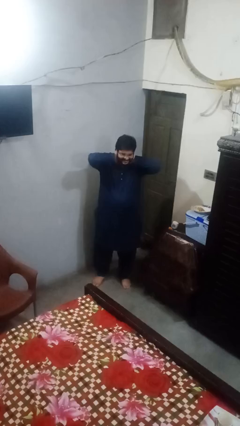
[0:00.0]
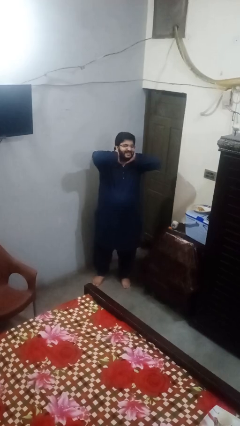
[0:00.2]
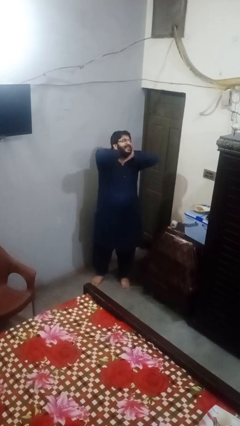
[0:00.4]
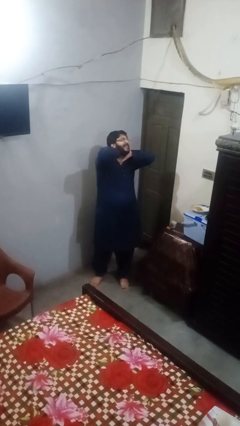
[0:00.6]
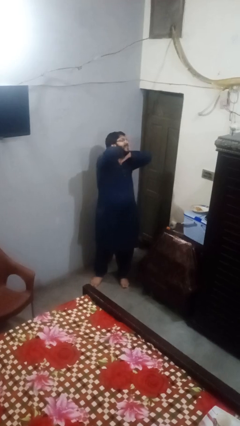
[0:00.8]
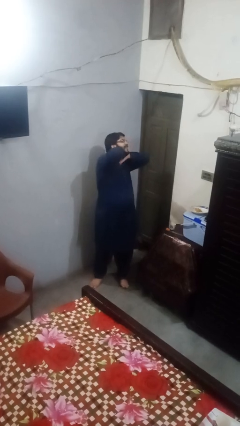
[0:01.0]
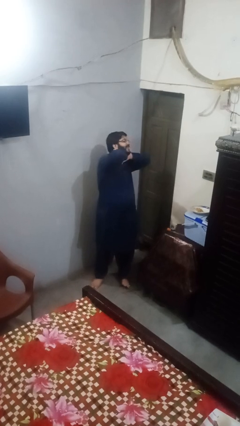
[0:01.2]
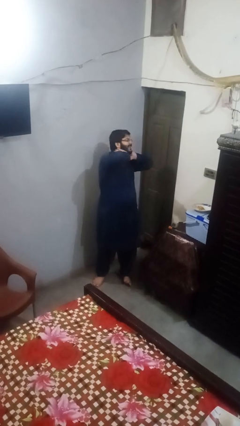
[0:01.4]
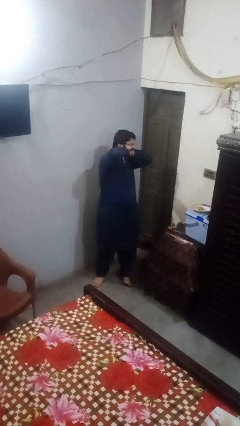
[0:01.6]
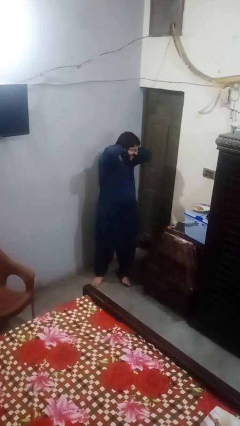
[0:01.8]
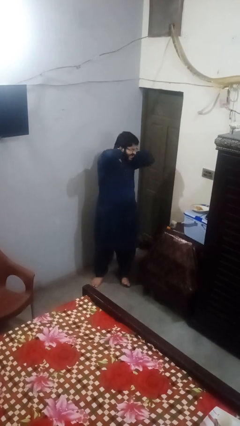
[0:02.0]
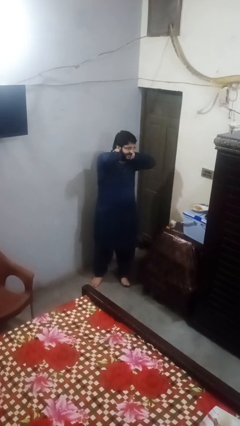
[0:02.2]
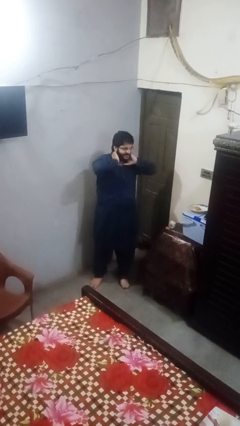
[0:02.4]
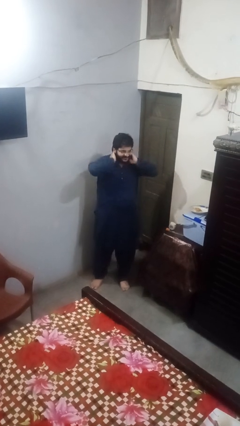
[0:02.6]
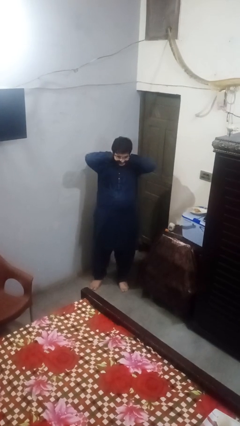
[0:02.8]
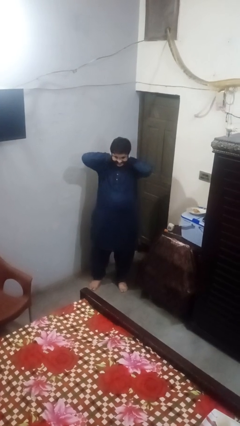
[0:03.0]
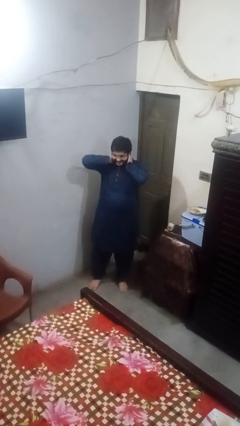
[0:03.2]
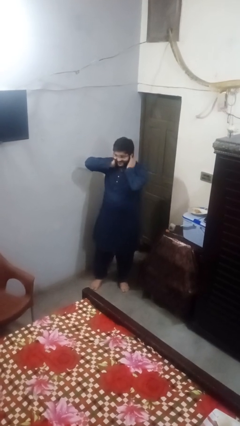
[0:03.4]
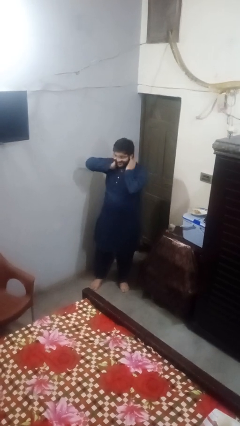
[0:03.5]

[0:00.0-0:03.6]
person rubs neck

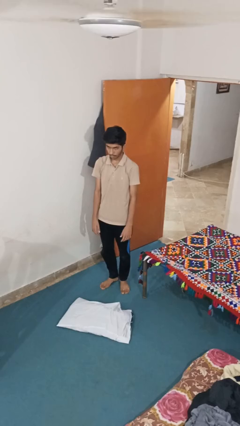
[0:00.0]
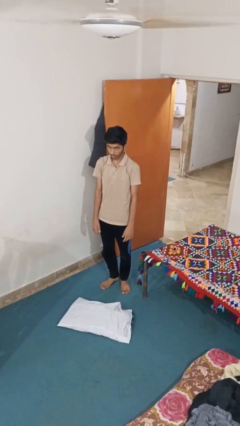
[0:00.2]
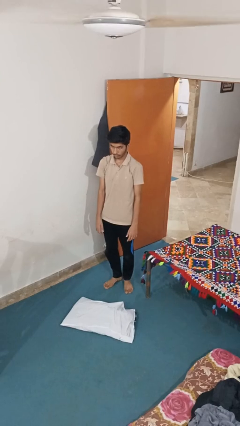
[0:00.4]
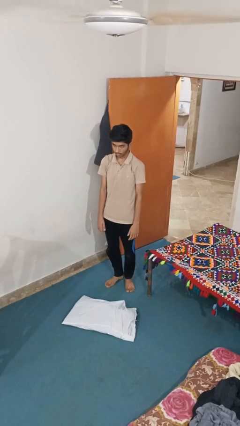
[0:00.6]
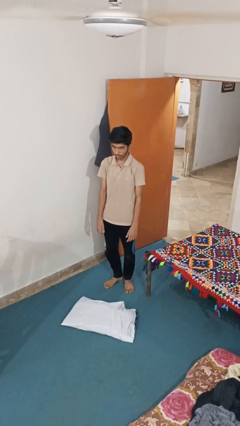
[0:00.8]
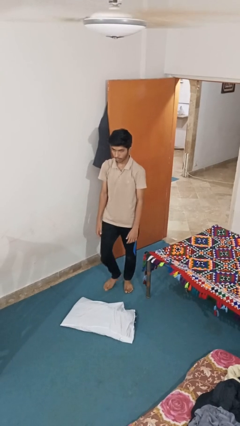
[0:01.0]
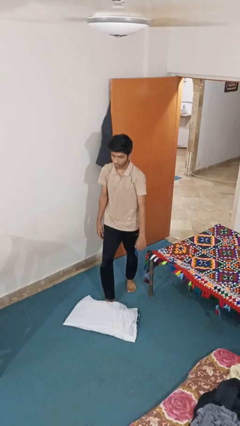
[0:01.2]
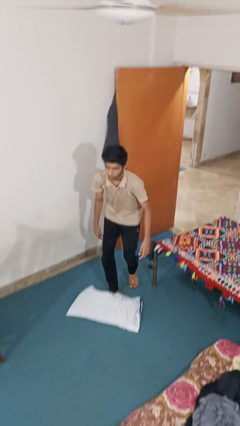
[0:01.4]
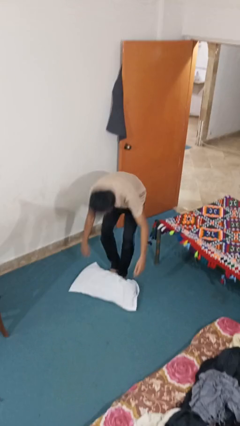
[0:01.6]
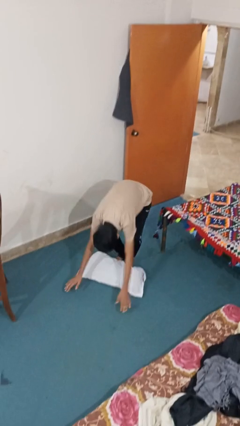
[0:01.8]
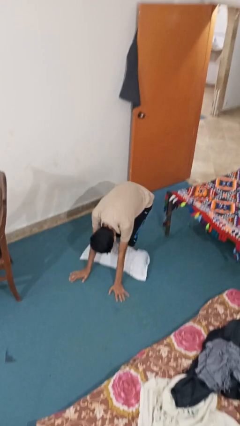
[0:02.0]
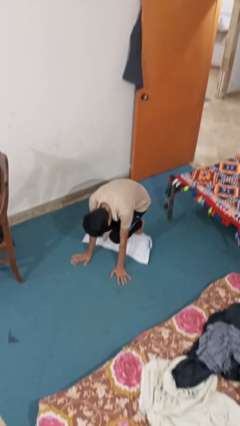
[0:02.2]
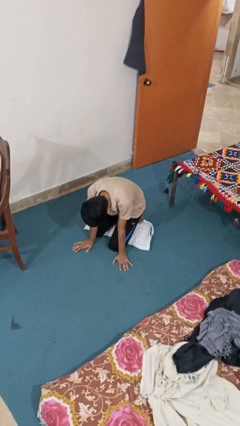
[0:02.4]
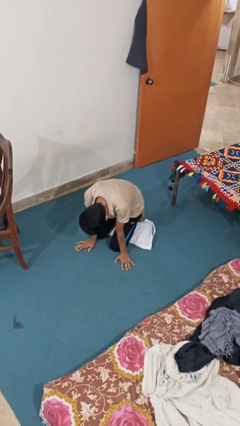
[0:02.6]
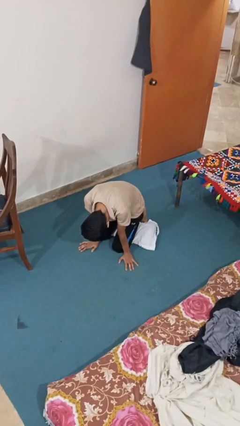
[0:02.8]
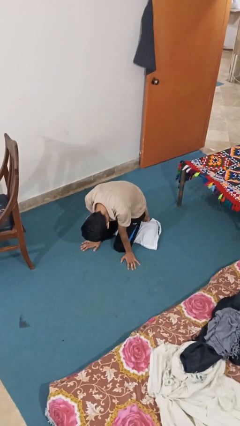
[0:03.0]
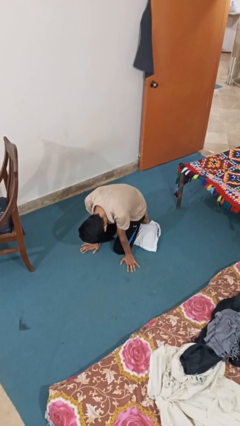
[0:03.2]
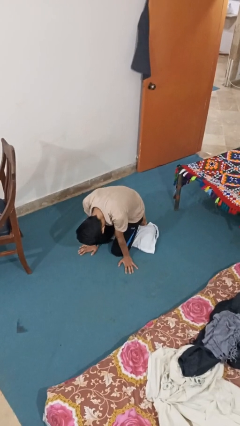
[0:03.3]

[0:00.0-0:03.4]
person trips on object on floor

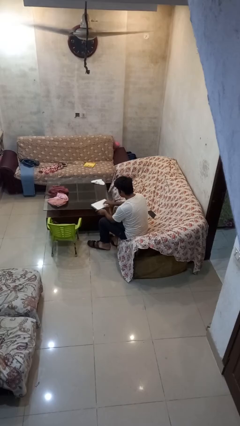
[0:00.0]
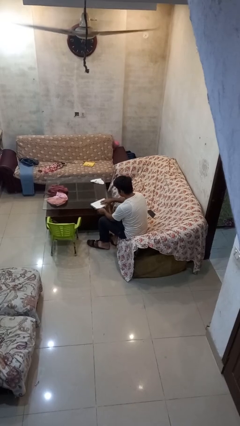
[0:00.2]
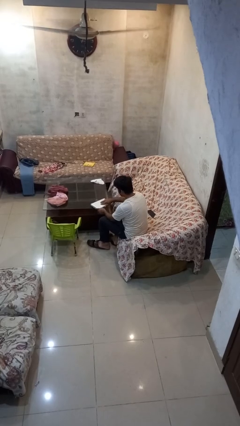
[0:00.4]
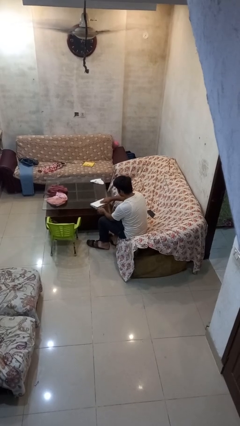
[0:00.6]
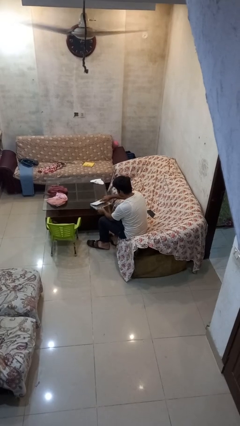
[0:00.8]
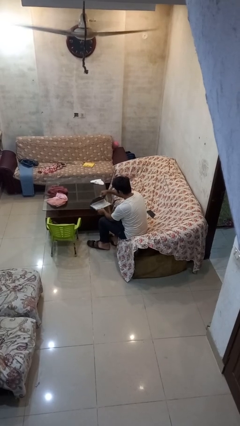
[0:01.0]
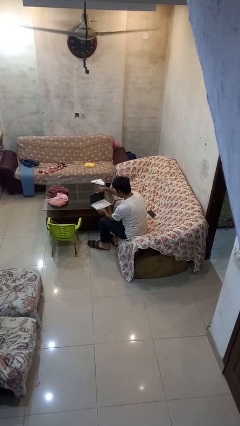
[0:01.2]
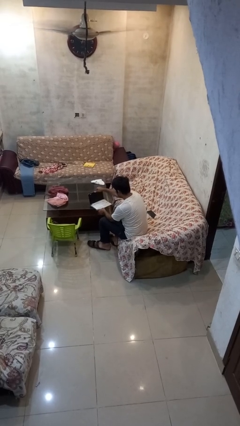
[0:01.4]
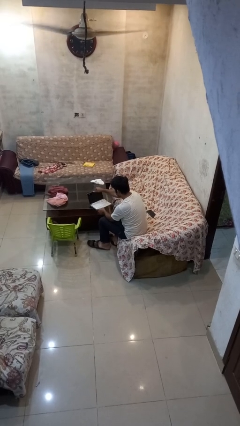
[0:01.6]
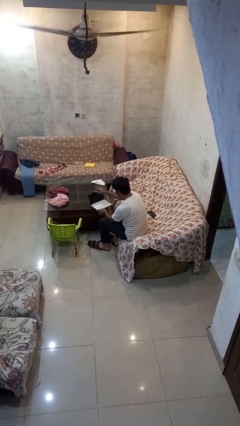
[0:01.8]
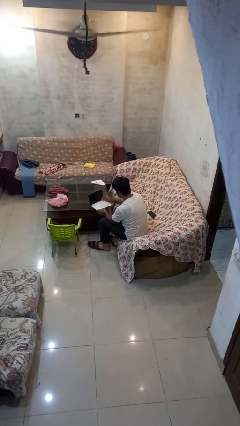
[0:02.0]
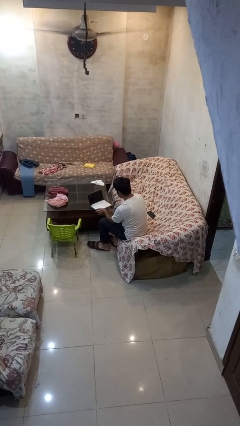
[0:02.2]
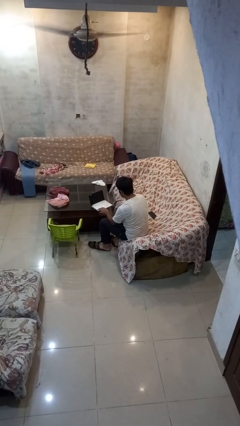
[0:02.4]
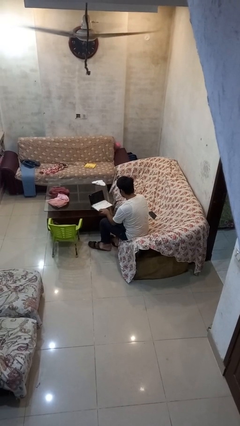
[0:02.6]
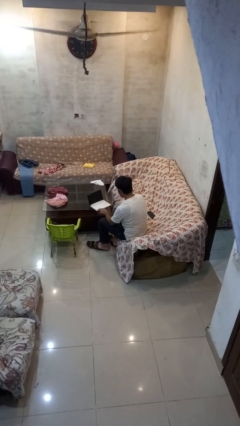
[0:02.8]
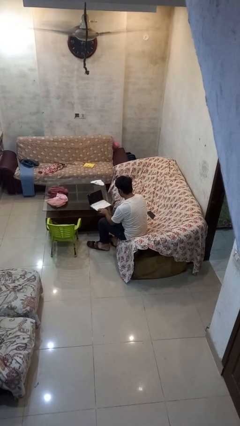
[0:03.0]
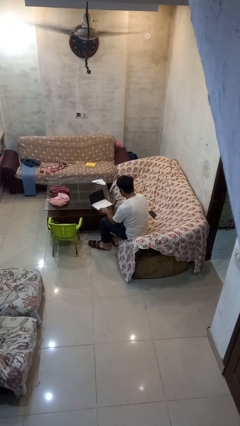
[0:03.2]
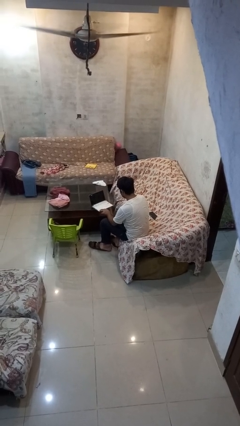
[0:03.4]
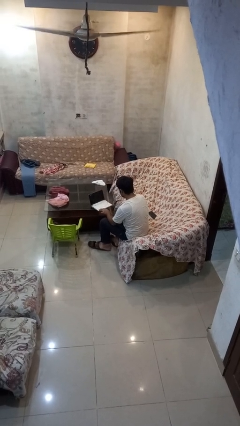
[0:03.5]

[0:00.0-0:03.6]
person opens laptop

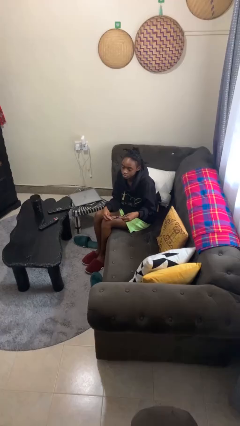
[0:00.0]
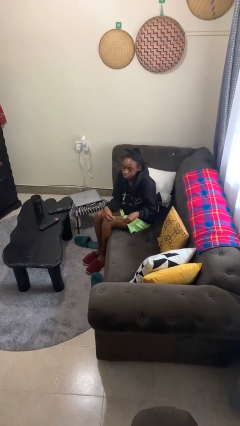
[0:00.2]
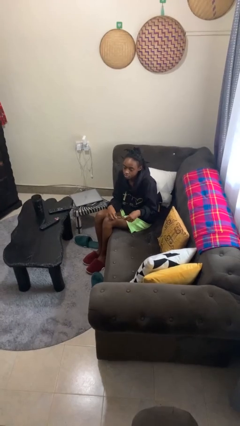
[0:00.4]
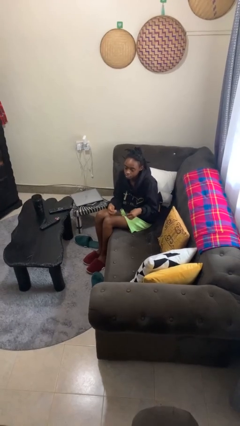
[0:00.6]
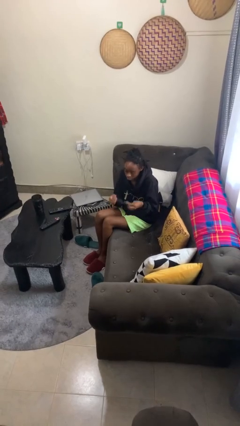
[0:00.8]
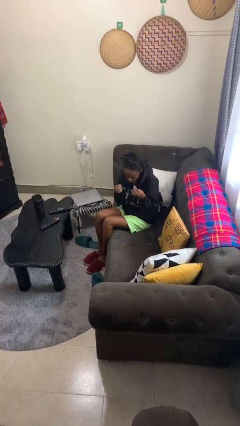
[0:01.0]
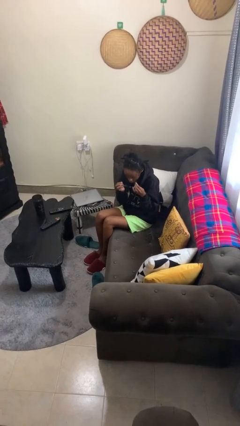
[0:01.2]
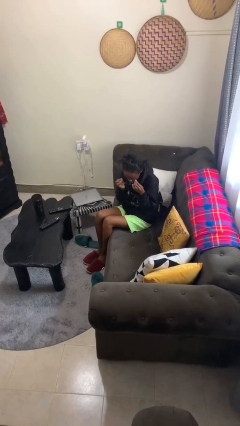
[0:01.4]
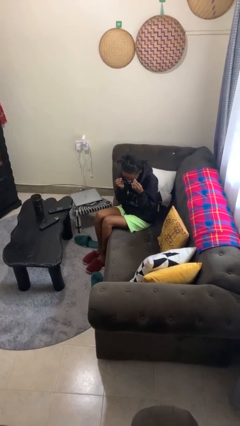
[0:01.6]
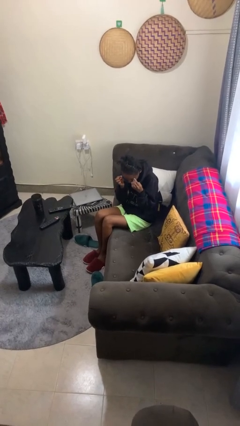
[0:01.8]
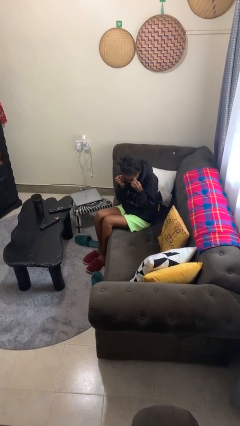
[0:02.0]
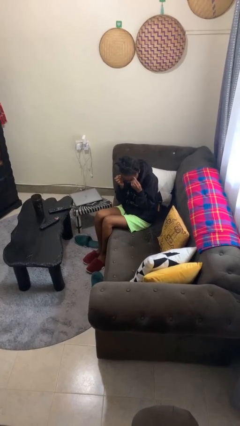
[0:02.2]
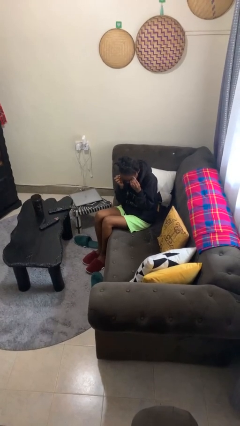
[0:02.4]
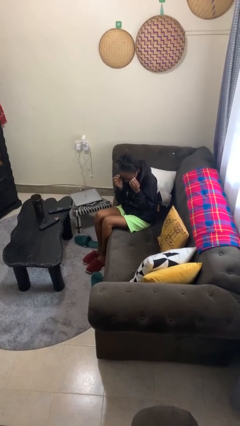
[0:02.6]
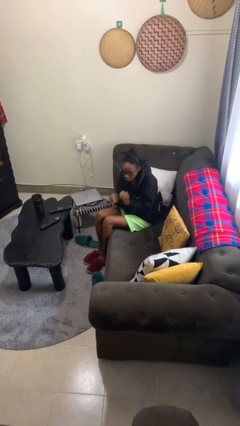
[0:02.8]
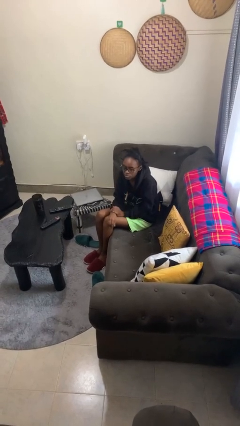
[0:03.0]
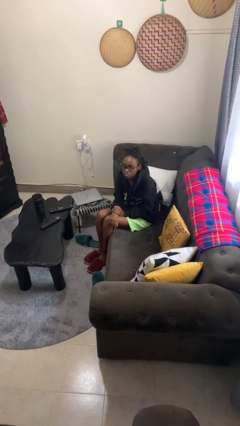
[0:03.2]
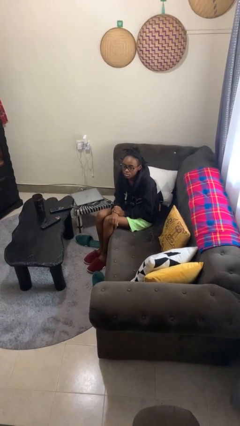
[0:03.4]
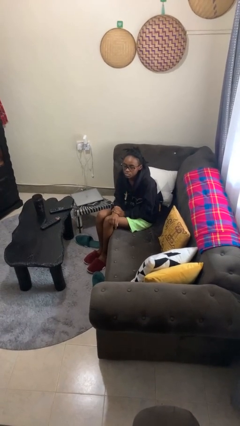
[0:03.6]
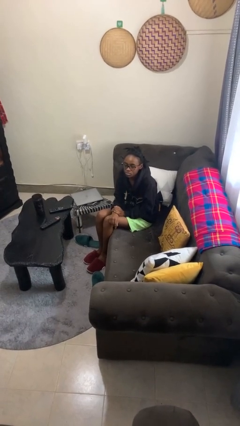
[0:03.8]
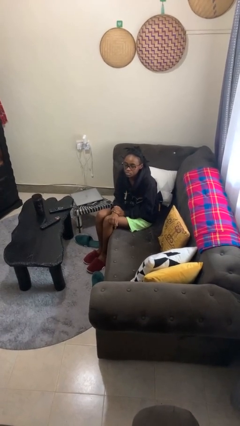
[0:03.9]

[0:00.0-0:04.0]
person puts on glasses

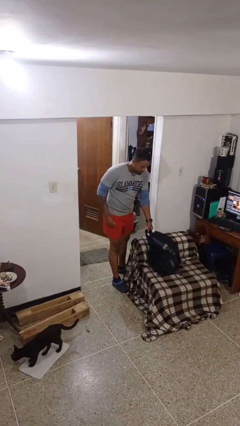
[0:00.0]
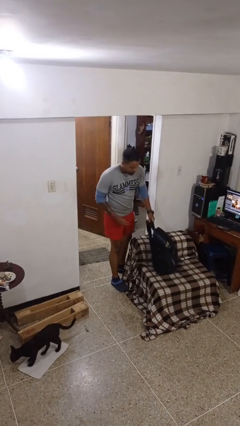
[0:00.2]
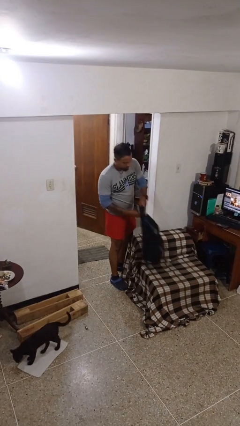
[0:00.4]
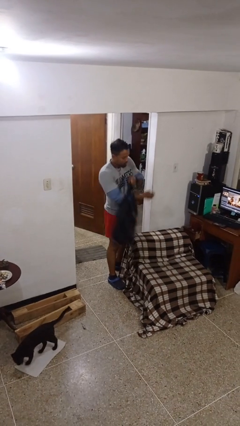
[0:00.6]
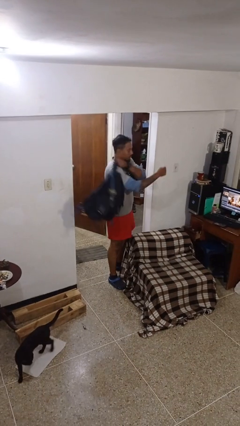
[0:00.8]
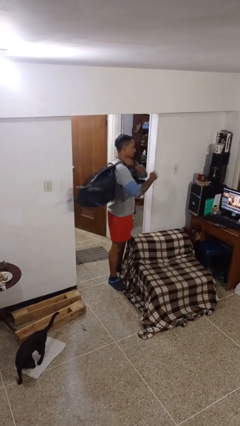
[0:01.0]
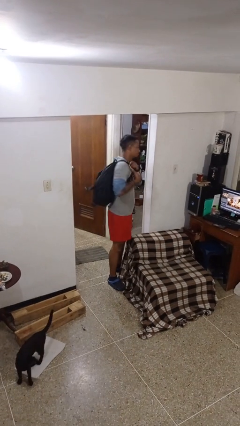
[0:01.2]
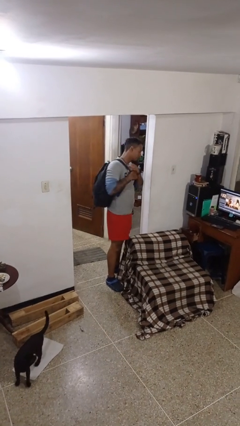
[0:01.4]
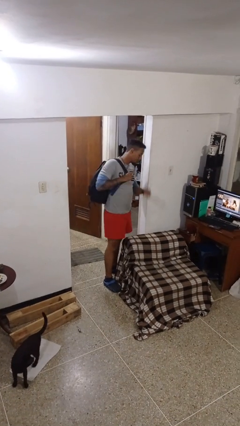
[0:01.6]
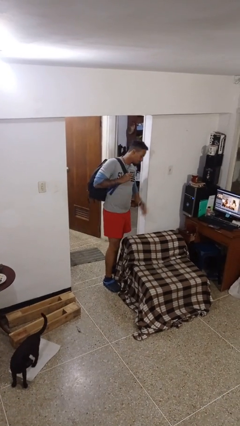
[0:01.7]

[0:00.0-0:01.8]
person picks up object from couch

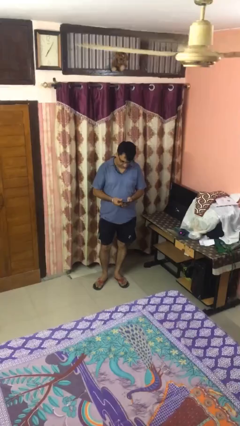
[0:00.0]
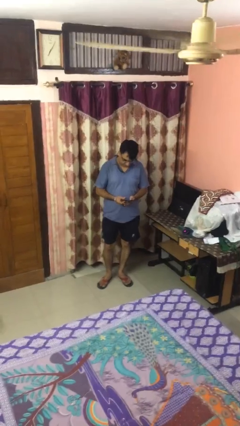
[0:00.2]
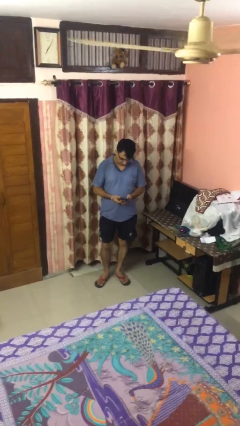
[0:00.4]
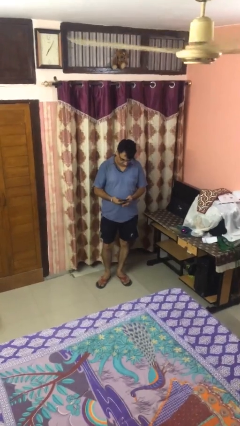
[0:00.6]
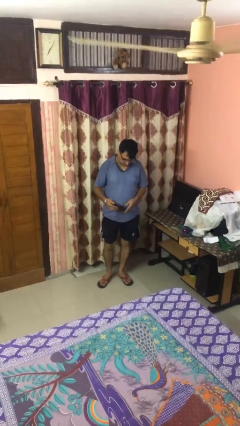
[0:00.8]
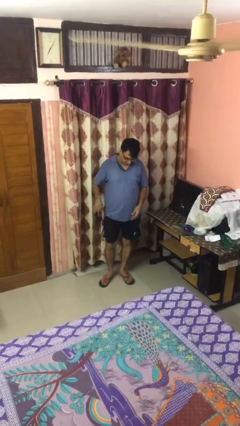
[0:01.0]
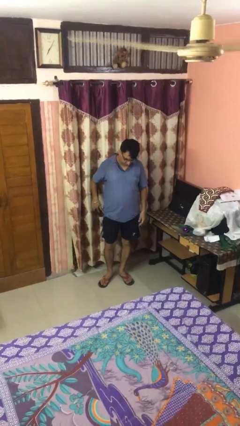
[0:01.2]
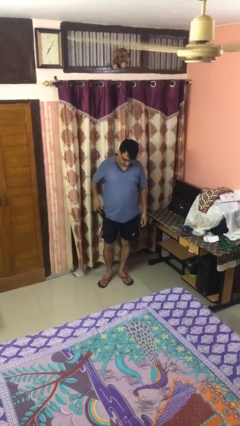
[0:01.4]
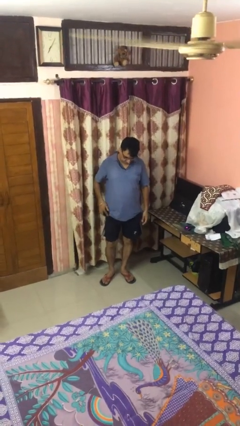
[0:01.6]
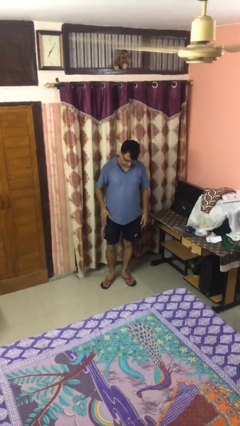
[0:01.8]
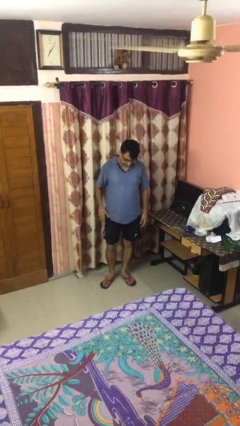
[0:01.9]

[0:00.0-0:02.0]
person puts phone into pocket
